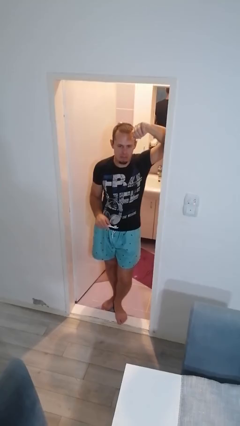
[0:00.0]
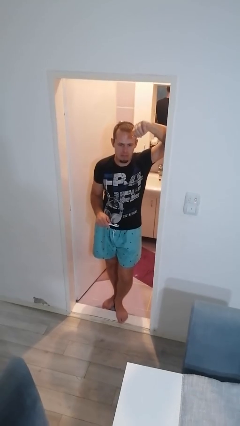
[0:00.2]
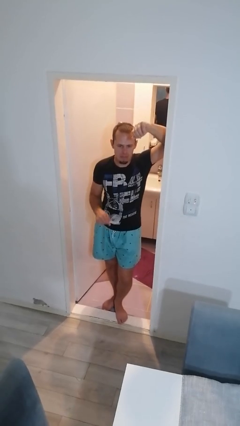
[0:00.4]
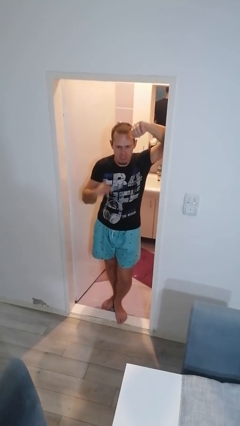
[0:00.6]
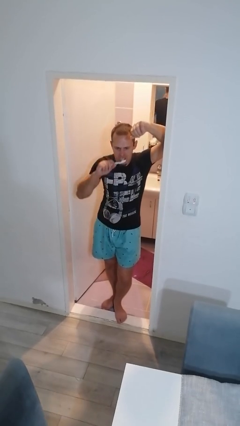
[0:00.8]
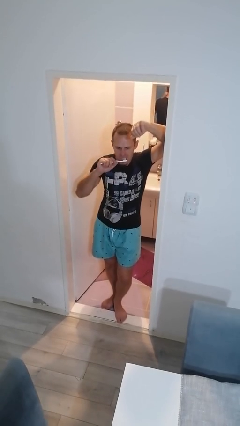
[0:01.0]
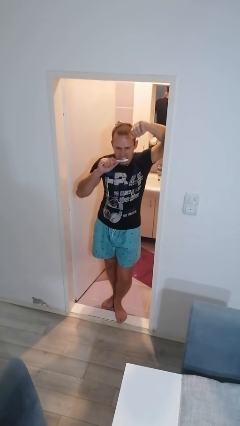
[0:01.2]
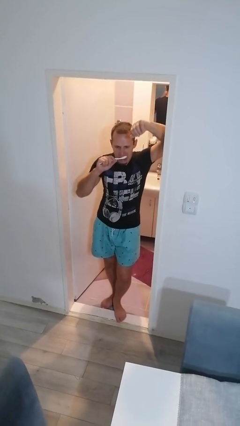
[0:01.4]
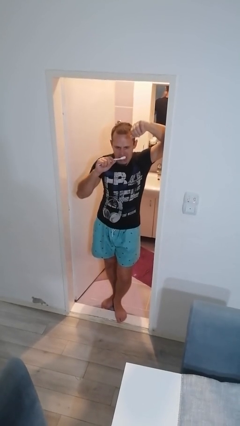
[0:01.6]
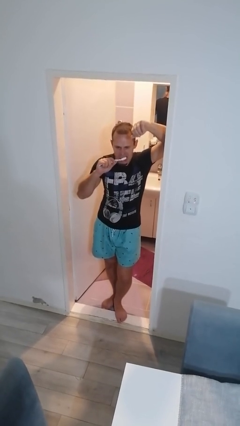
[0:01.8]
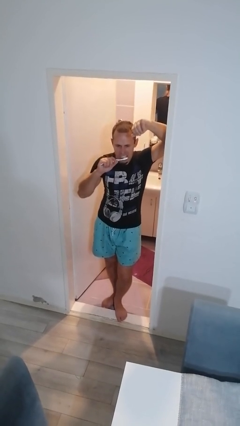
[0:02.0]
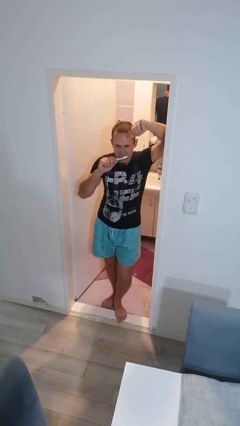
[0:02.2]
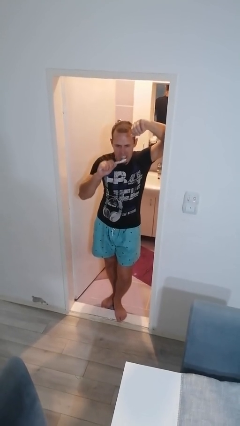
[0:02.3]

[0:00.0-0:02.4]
person brushes teeth

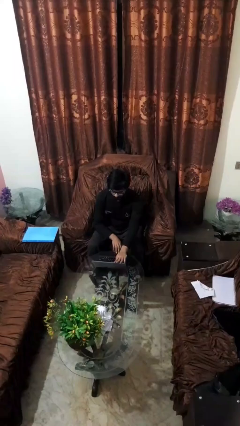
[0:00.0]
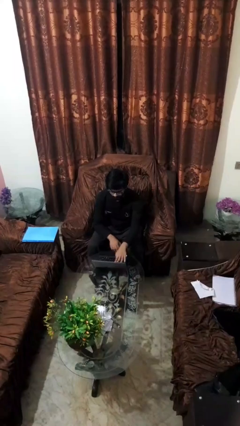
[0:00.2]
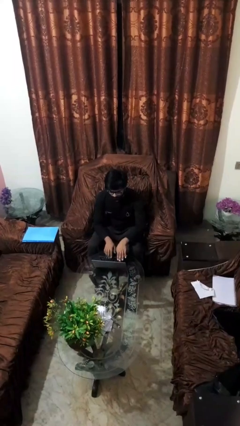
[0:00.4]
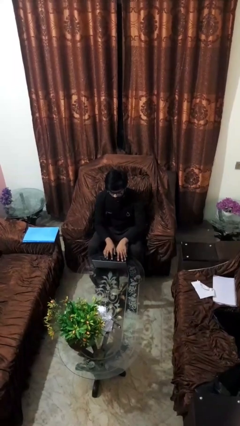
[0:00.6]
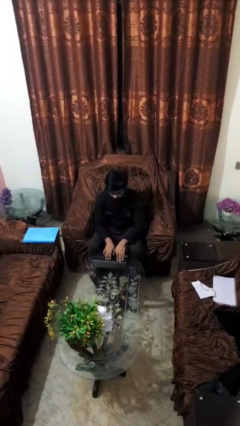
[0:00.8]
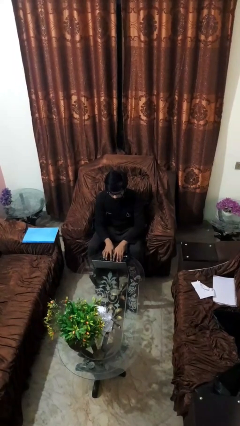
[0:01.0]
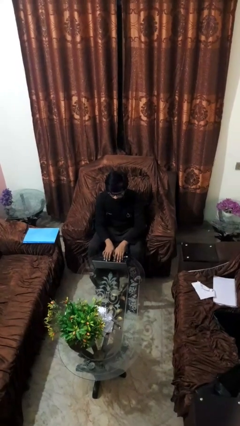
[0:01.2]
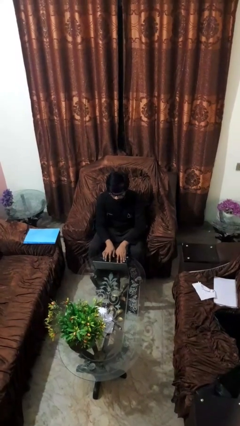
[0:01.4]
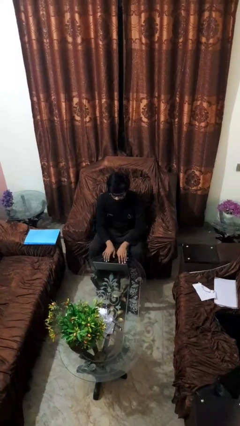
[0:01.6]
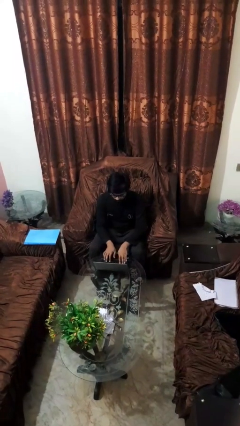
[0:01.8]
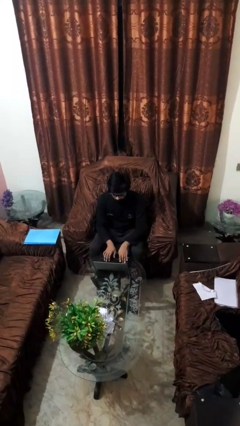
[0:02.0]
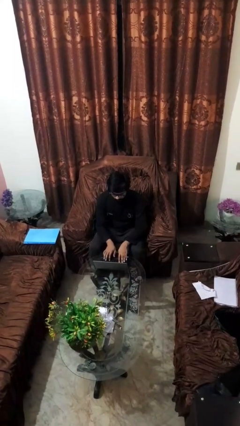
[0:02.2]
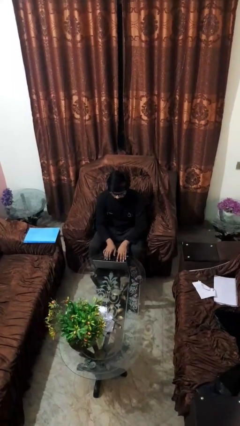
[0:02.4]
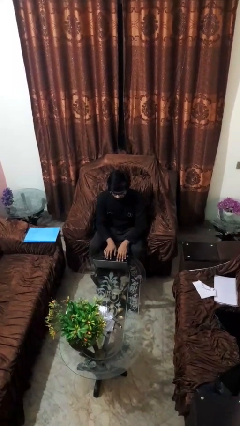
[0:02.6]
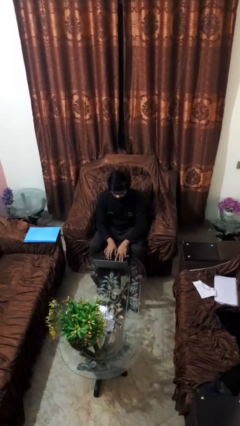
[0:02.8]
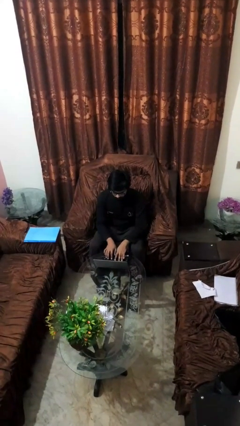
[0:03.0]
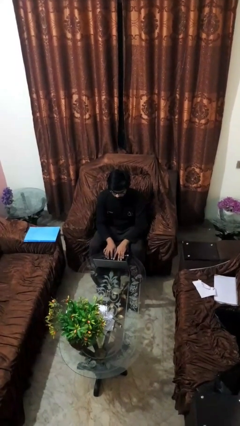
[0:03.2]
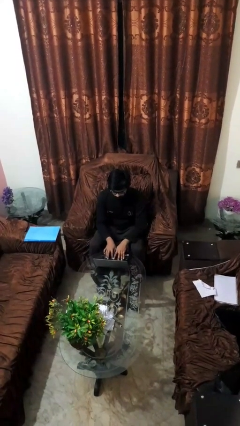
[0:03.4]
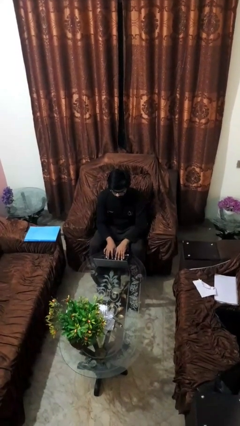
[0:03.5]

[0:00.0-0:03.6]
person interacts with laptop

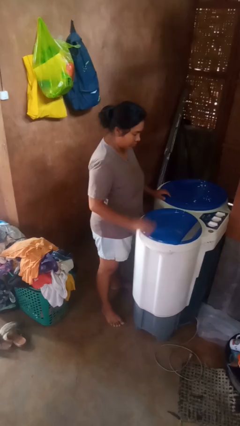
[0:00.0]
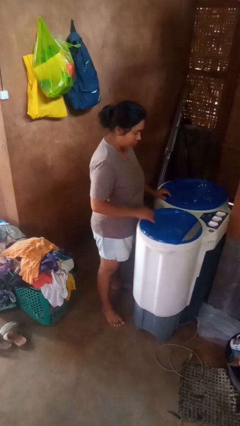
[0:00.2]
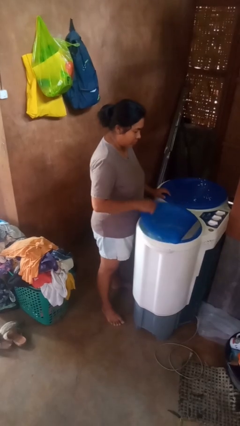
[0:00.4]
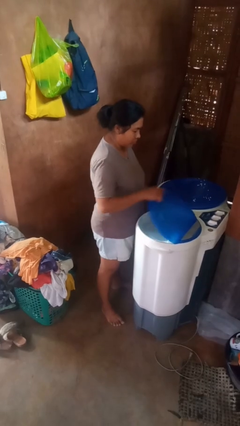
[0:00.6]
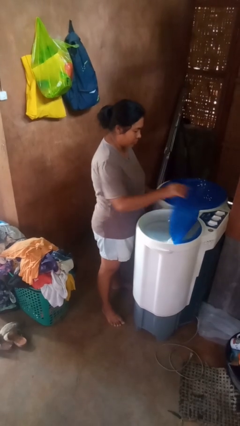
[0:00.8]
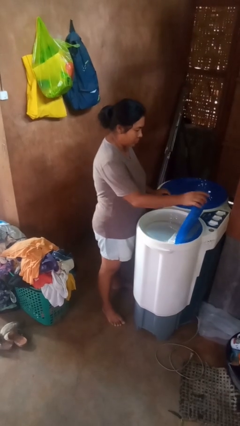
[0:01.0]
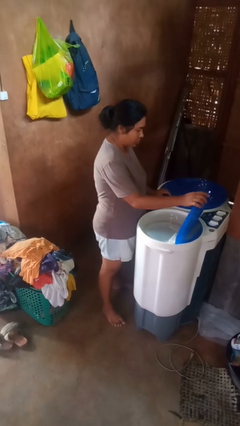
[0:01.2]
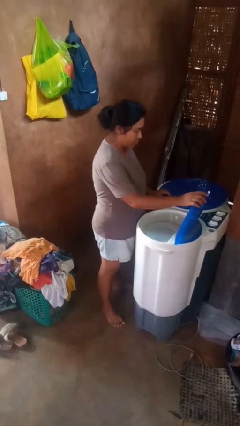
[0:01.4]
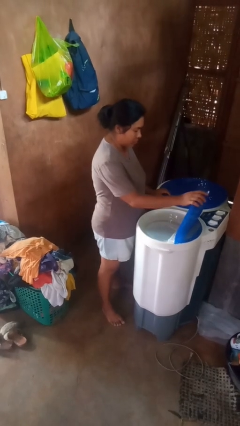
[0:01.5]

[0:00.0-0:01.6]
person opens clothes washer

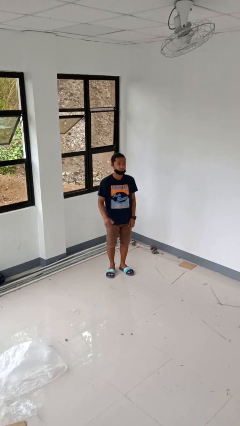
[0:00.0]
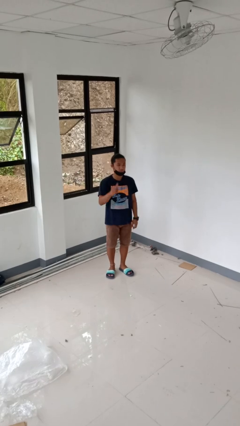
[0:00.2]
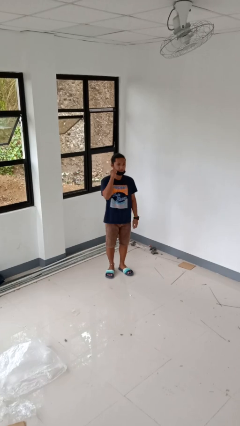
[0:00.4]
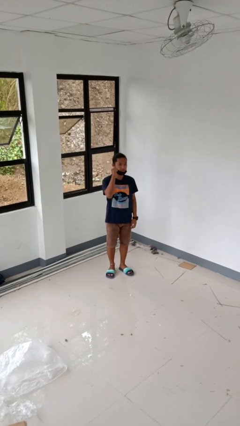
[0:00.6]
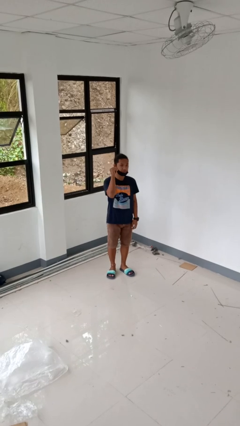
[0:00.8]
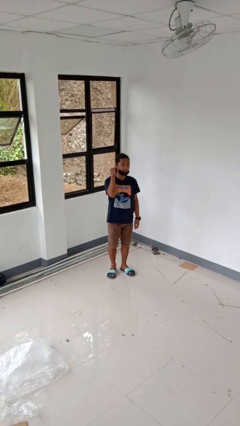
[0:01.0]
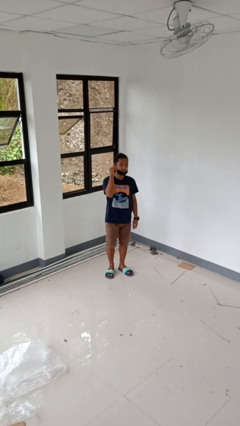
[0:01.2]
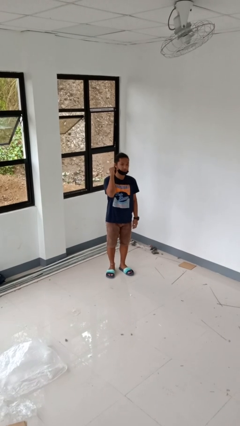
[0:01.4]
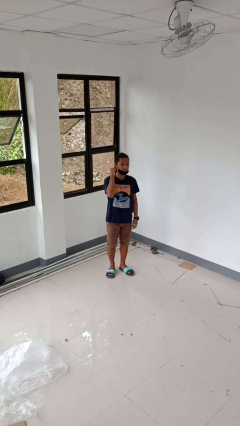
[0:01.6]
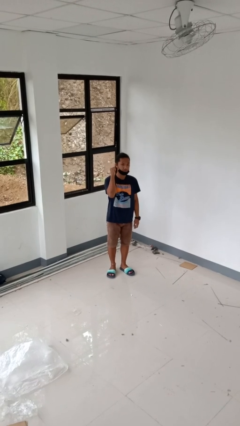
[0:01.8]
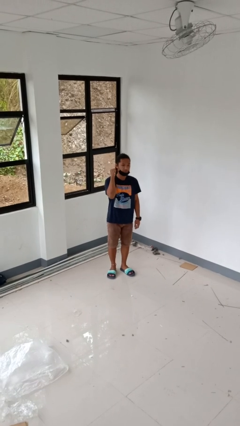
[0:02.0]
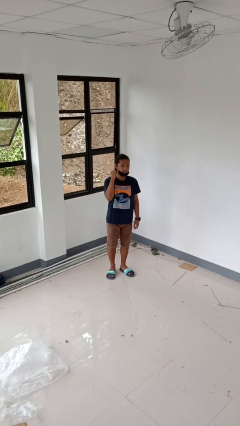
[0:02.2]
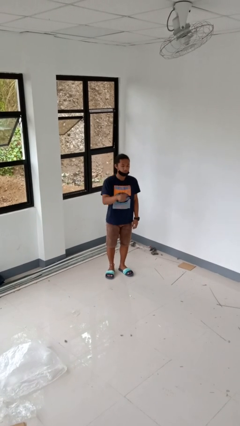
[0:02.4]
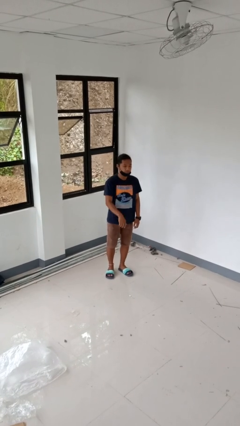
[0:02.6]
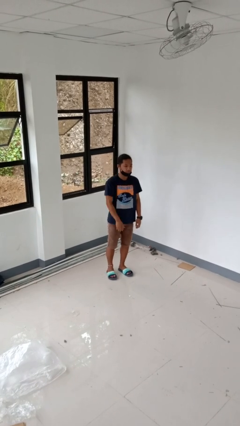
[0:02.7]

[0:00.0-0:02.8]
person gestures behind me

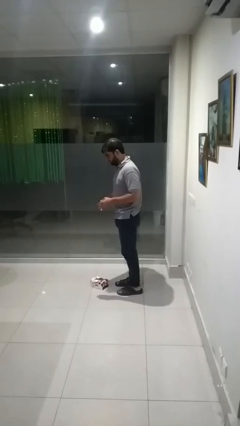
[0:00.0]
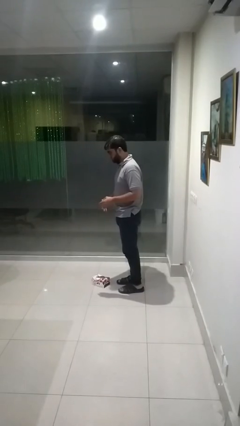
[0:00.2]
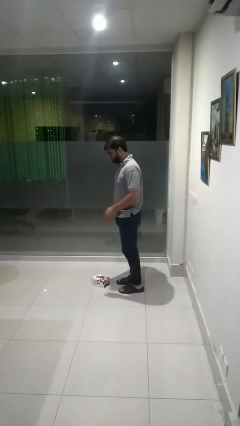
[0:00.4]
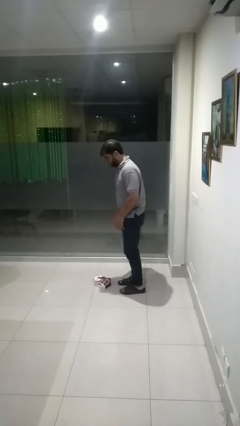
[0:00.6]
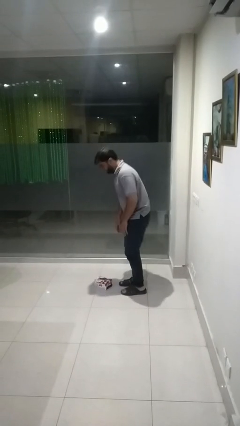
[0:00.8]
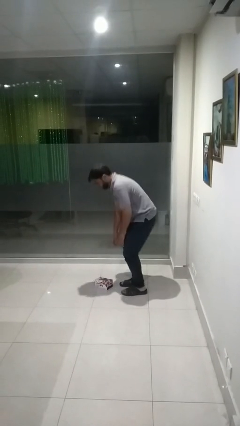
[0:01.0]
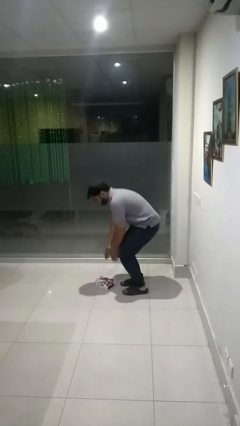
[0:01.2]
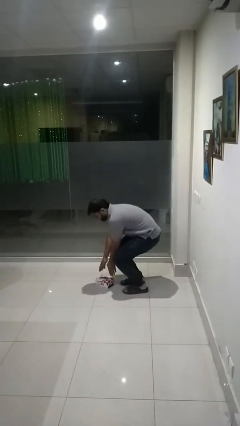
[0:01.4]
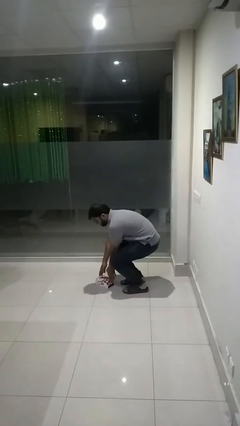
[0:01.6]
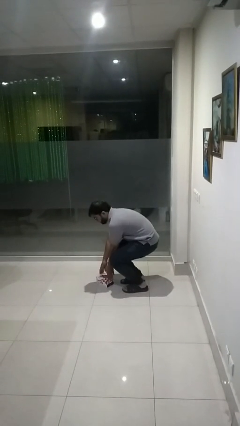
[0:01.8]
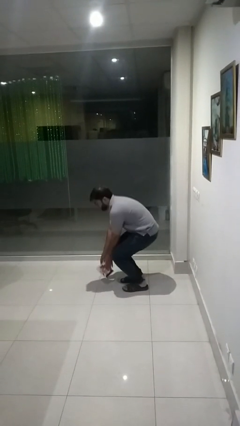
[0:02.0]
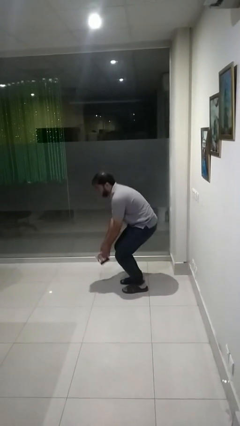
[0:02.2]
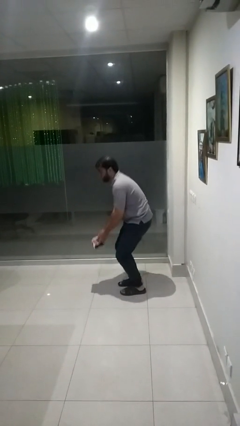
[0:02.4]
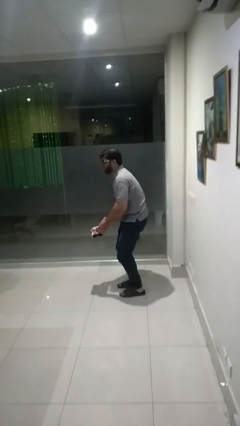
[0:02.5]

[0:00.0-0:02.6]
person picks up object from floor

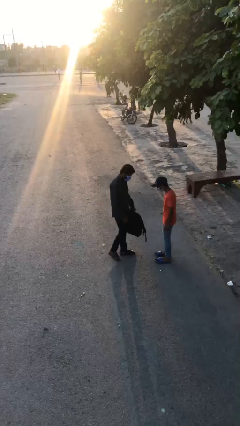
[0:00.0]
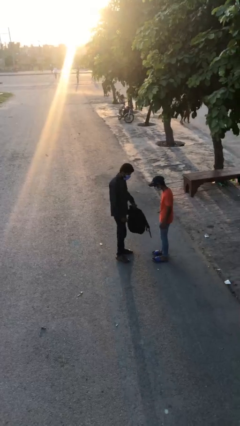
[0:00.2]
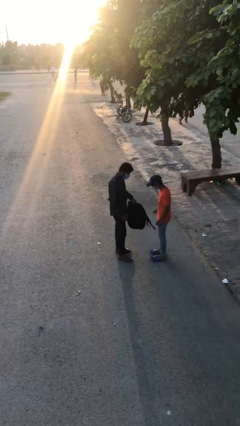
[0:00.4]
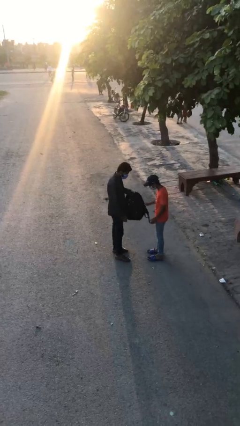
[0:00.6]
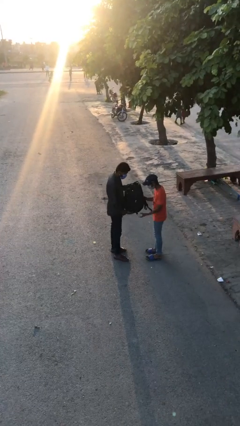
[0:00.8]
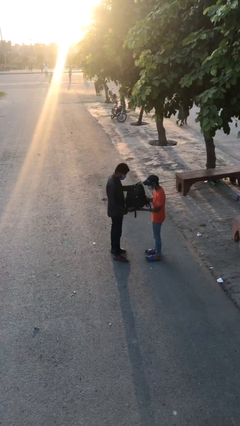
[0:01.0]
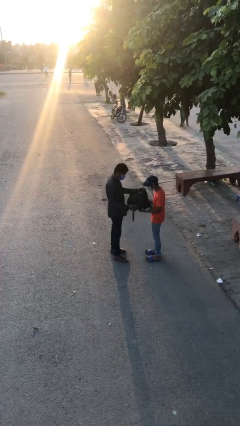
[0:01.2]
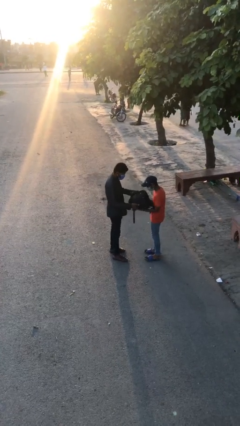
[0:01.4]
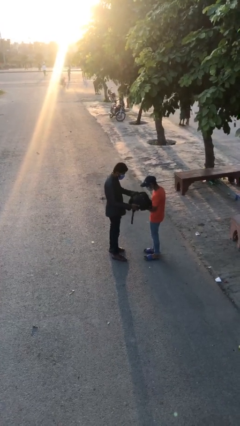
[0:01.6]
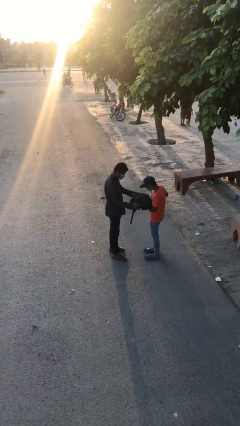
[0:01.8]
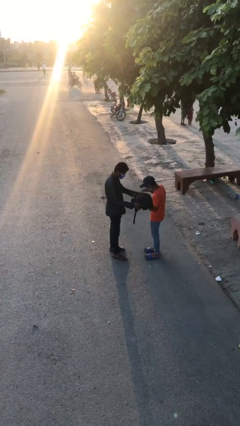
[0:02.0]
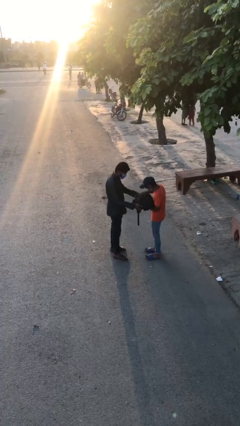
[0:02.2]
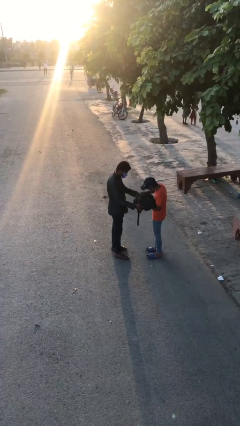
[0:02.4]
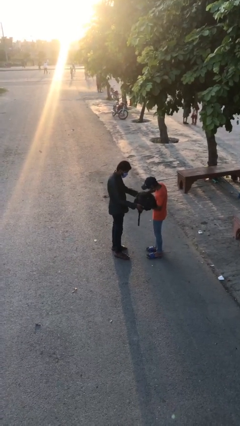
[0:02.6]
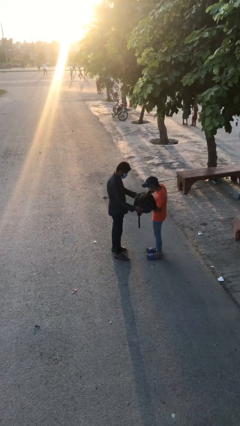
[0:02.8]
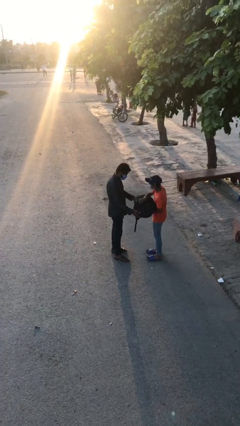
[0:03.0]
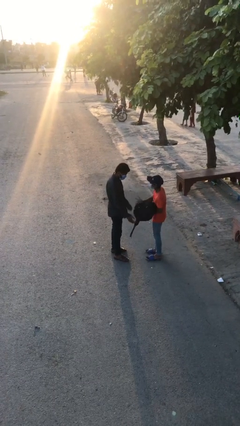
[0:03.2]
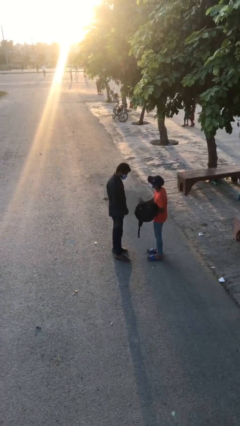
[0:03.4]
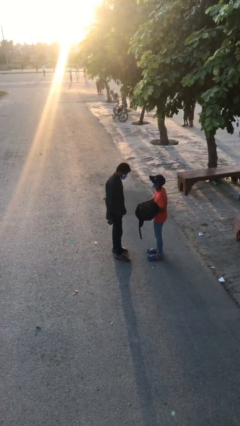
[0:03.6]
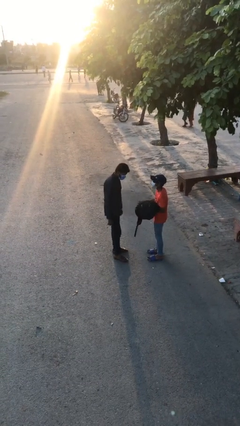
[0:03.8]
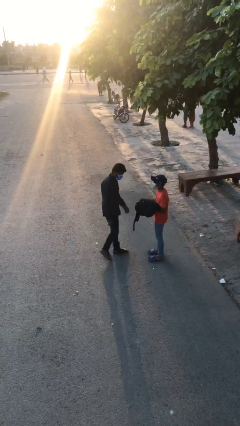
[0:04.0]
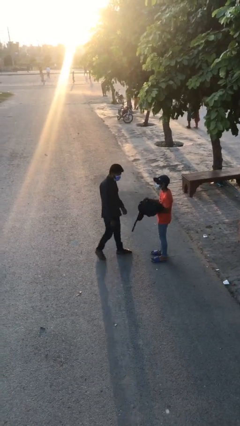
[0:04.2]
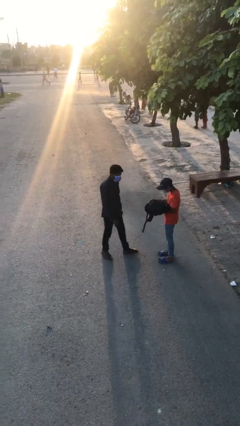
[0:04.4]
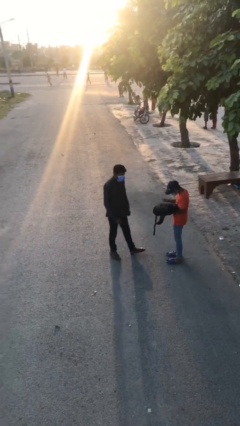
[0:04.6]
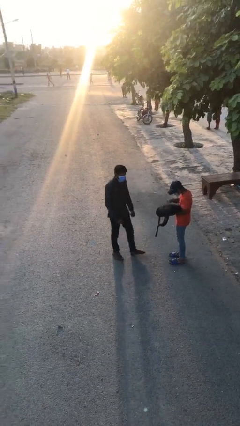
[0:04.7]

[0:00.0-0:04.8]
person transfers object to person
